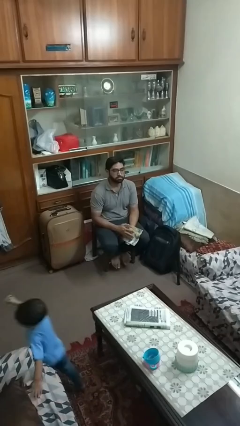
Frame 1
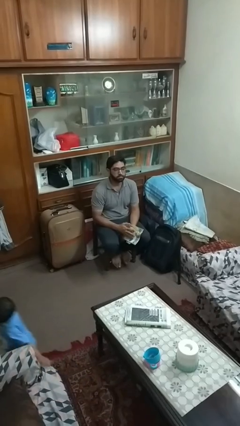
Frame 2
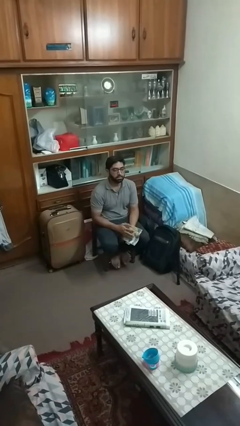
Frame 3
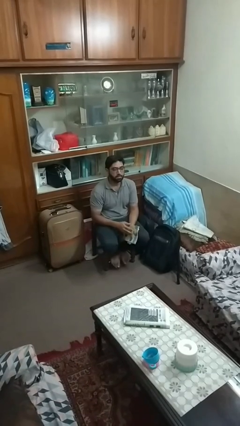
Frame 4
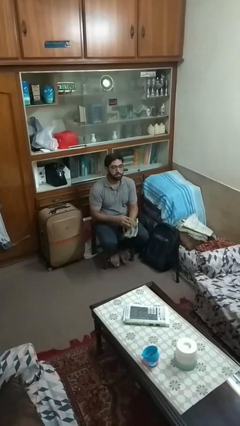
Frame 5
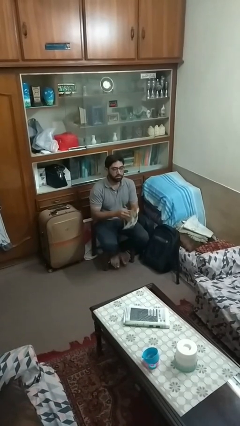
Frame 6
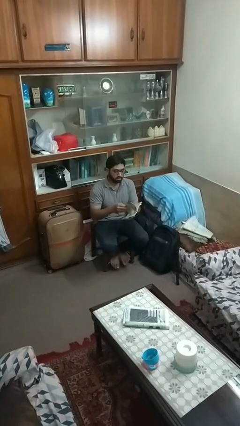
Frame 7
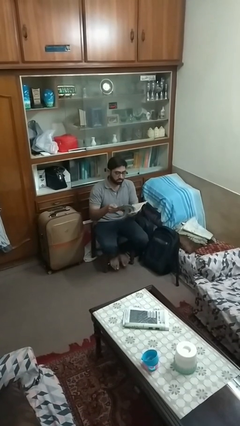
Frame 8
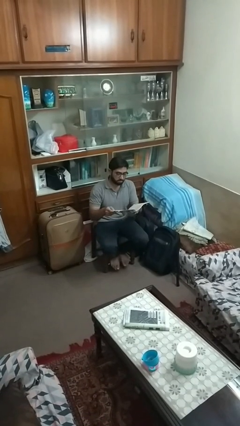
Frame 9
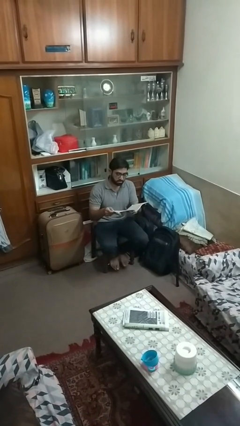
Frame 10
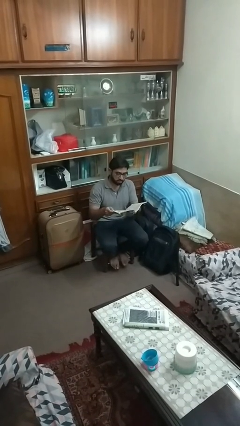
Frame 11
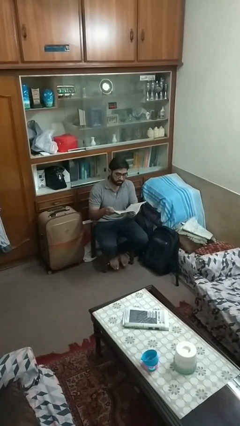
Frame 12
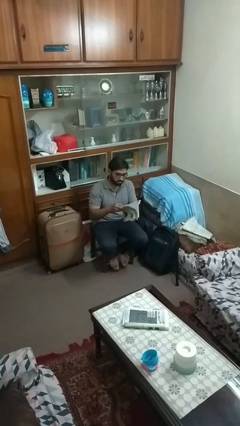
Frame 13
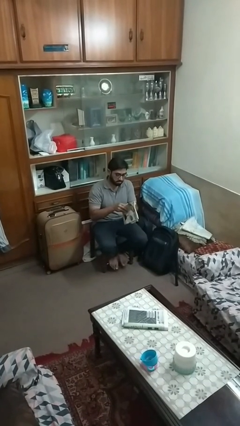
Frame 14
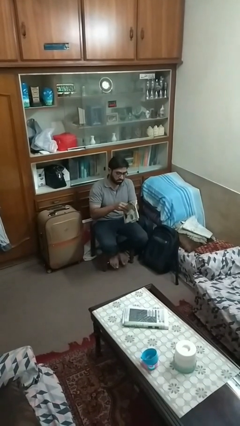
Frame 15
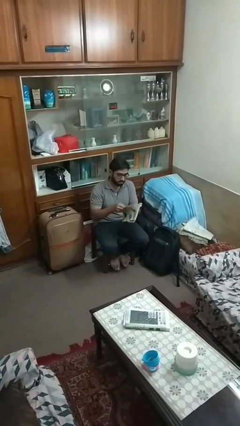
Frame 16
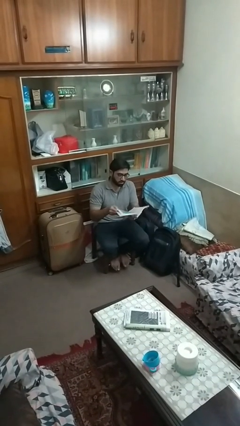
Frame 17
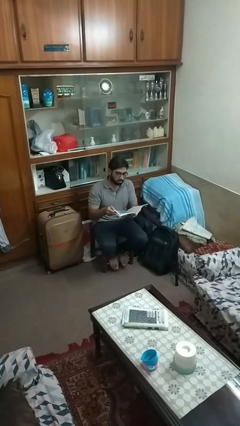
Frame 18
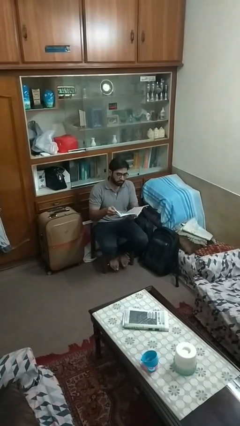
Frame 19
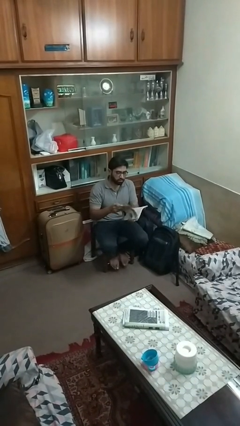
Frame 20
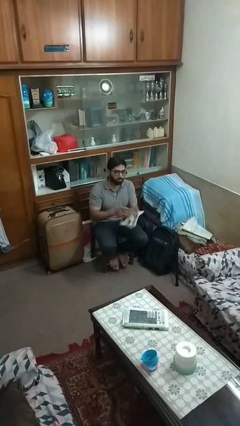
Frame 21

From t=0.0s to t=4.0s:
person reads magazine

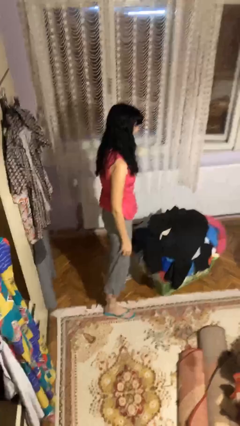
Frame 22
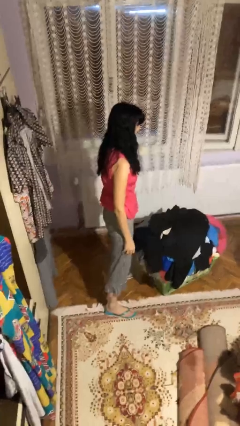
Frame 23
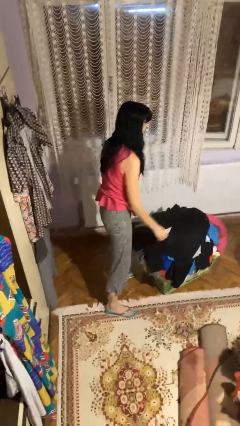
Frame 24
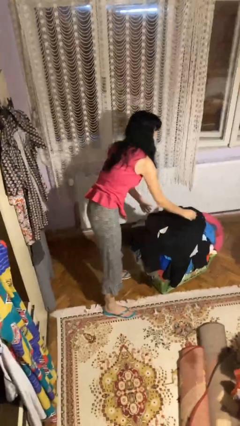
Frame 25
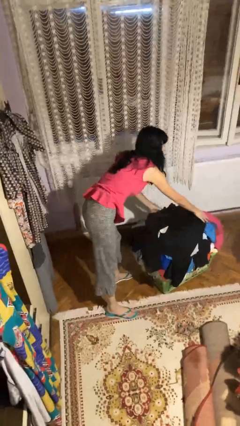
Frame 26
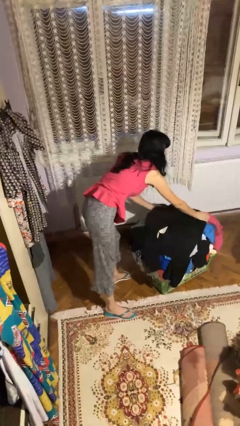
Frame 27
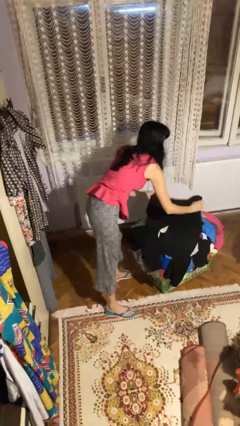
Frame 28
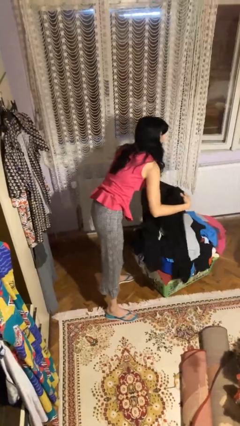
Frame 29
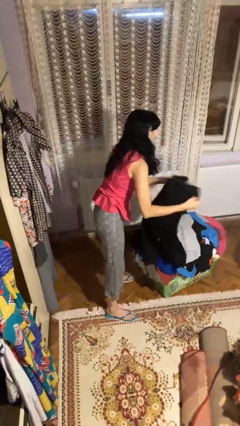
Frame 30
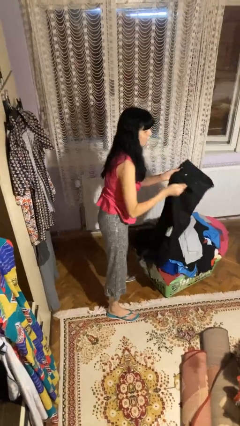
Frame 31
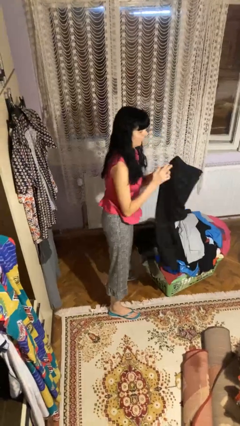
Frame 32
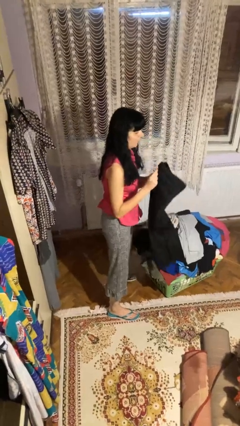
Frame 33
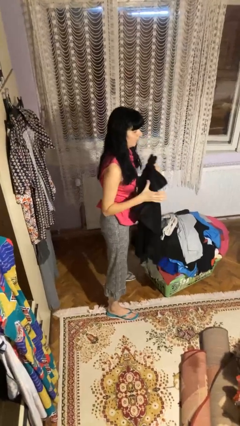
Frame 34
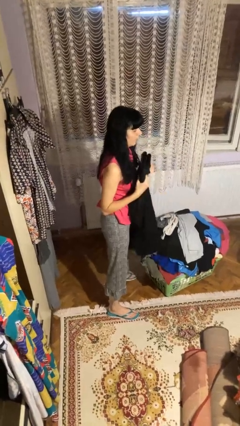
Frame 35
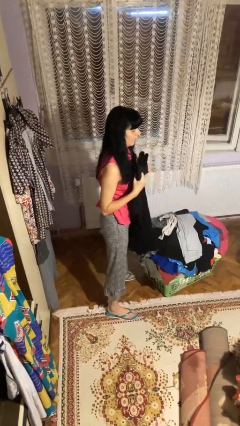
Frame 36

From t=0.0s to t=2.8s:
person folds pants

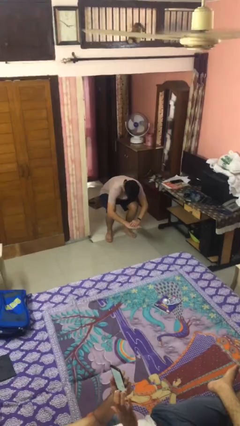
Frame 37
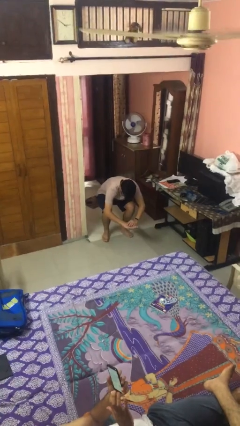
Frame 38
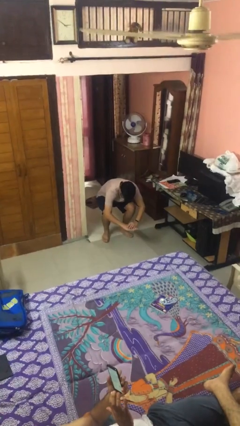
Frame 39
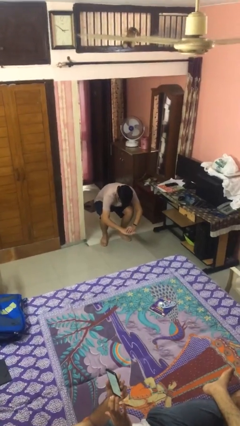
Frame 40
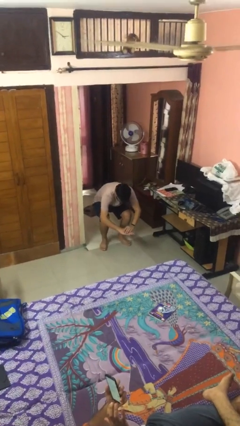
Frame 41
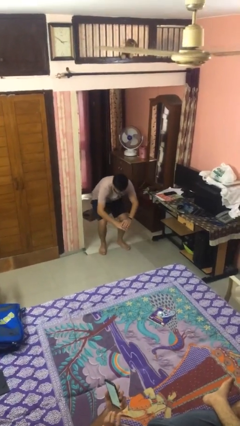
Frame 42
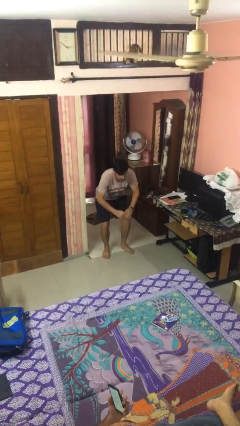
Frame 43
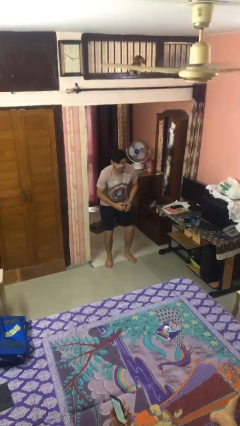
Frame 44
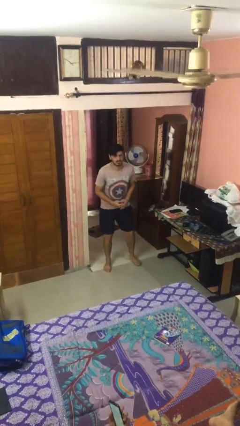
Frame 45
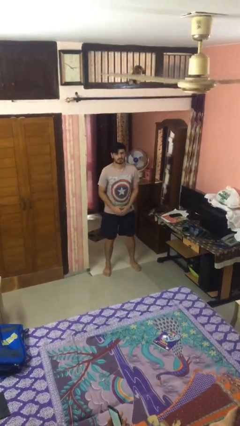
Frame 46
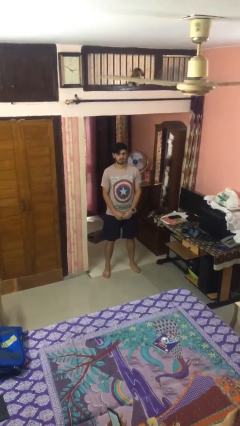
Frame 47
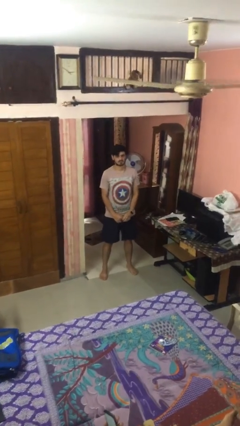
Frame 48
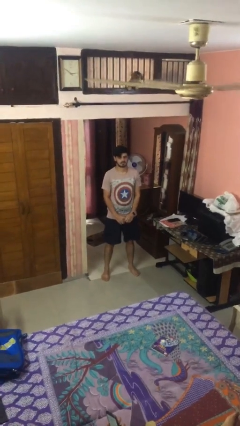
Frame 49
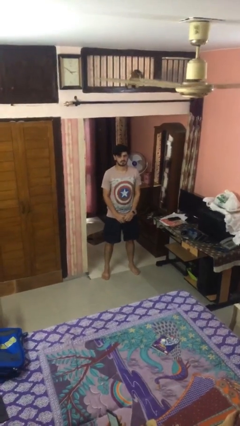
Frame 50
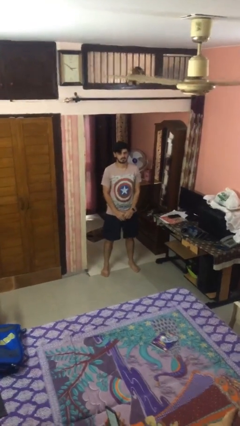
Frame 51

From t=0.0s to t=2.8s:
person stands up

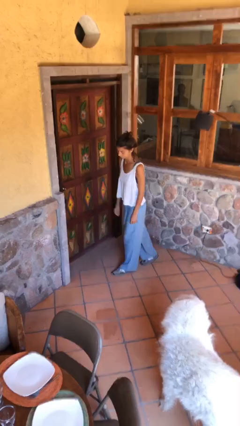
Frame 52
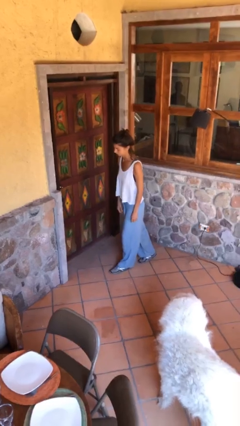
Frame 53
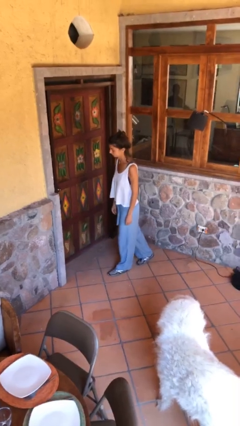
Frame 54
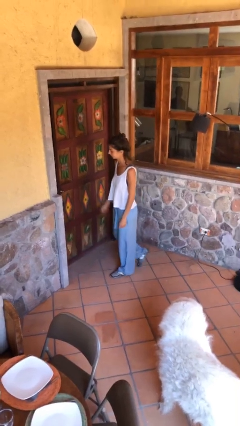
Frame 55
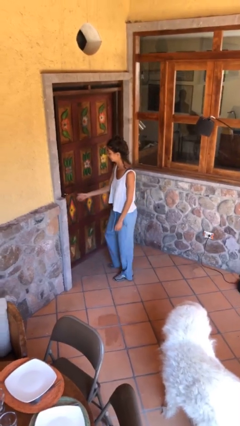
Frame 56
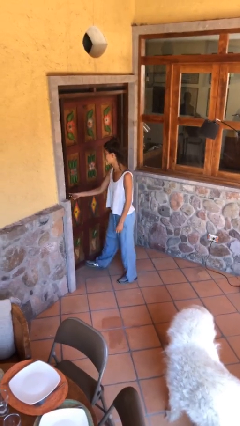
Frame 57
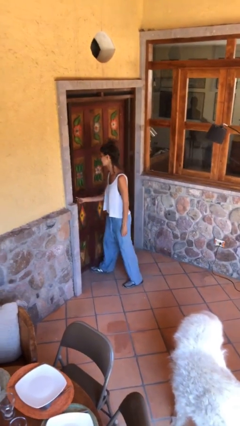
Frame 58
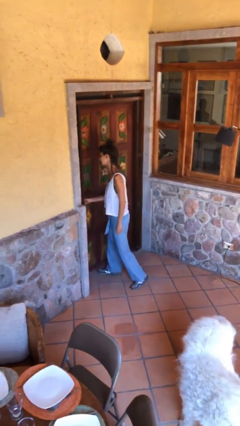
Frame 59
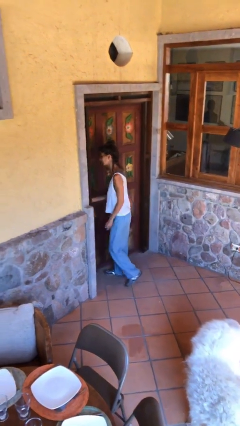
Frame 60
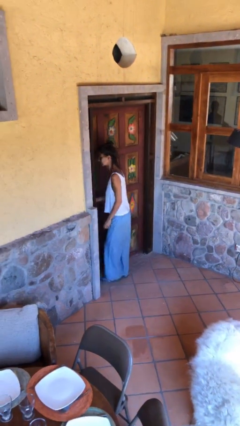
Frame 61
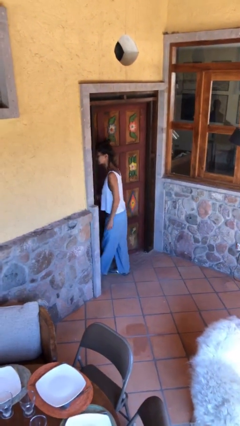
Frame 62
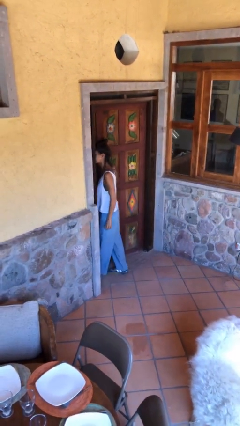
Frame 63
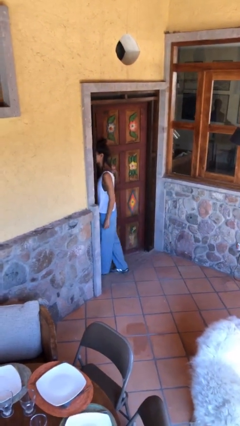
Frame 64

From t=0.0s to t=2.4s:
person opens facility door

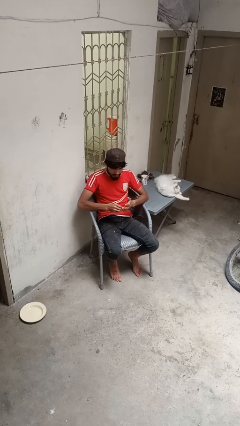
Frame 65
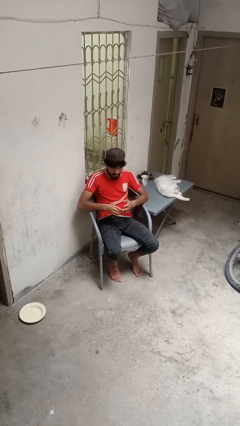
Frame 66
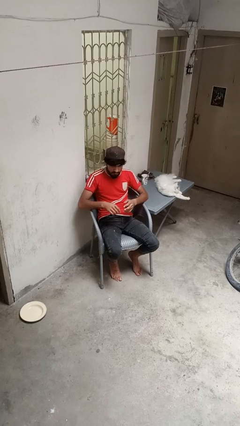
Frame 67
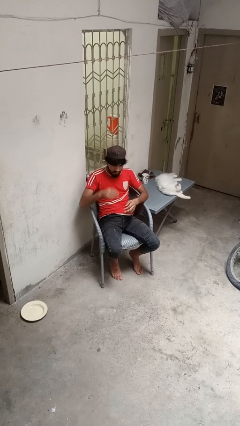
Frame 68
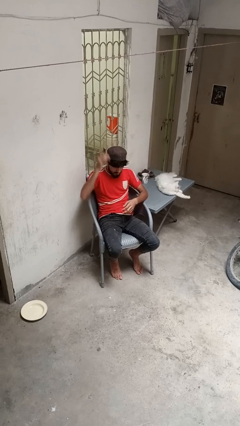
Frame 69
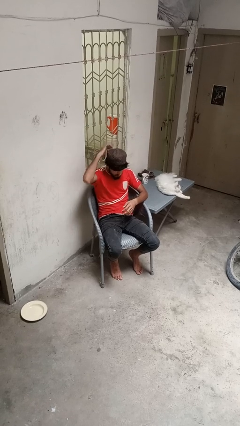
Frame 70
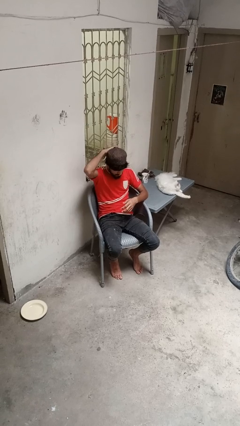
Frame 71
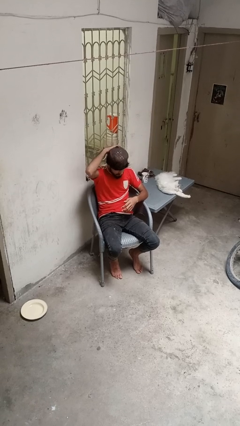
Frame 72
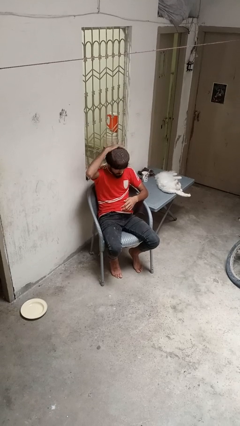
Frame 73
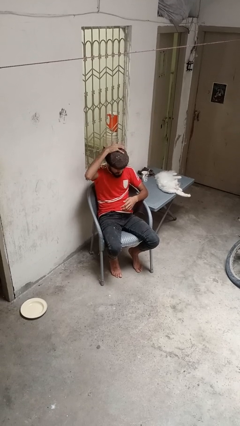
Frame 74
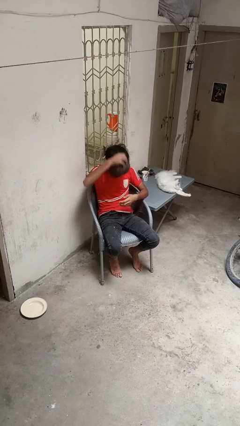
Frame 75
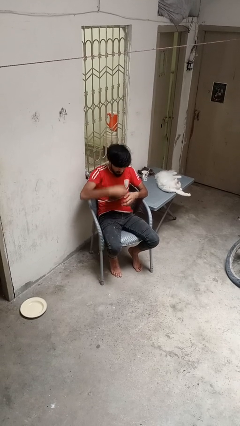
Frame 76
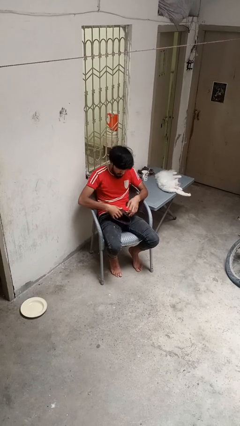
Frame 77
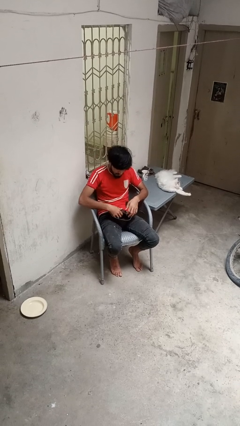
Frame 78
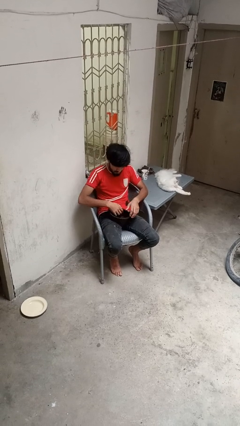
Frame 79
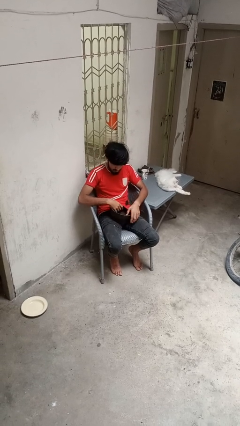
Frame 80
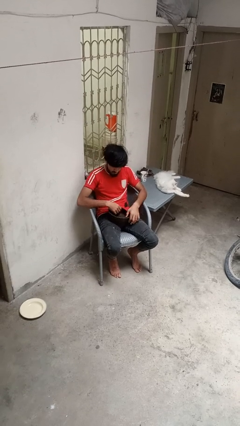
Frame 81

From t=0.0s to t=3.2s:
person takes off hat

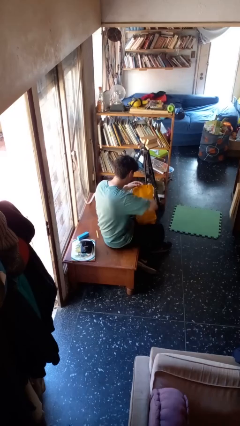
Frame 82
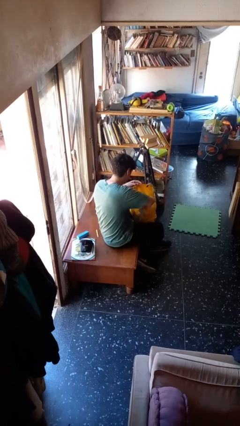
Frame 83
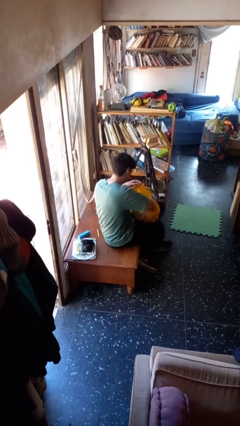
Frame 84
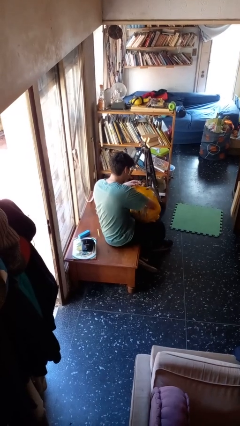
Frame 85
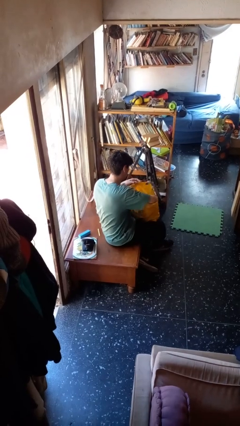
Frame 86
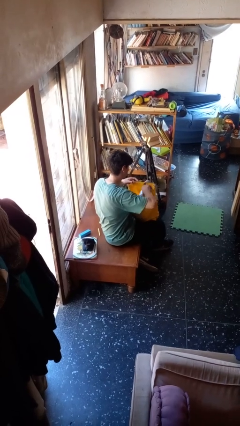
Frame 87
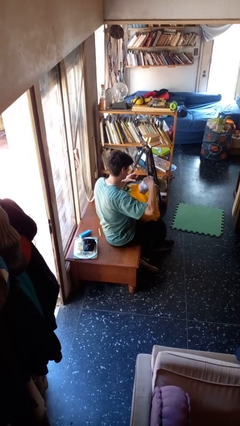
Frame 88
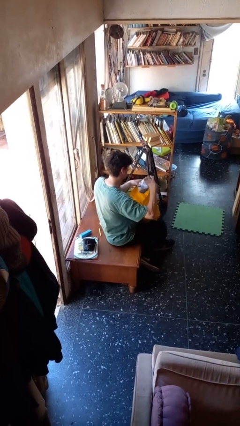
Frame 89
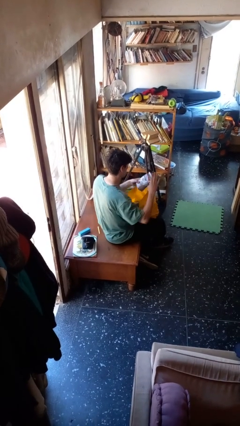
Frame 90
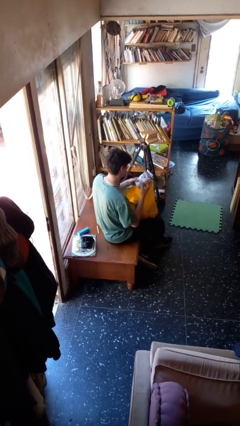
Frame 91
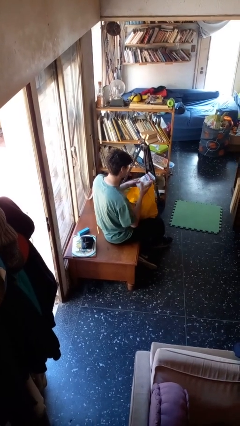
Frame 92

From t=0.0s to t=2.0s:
person takes object from bag
